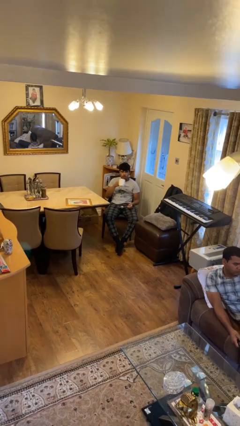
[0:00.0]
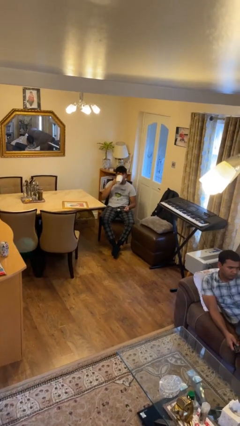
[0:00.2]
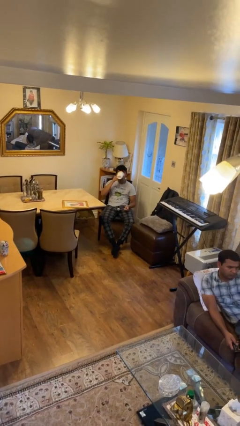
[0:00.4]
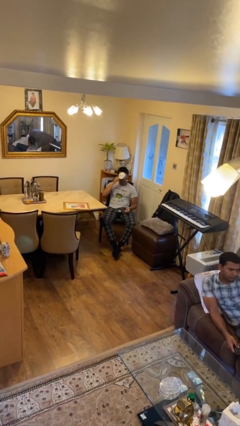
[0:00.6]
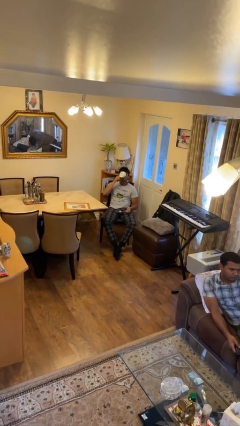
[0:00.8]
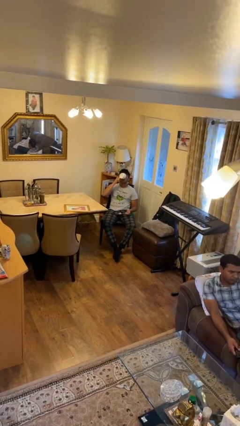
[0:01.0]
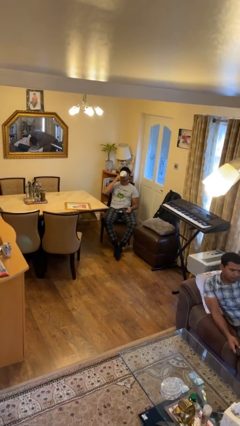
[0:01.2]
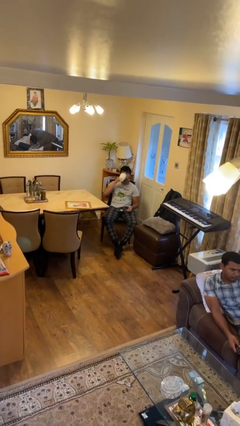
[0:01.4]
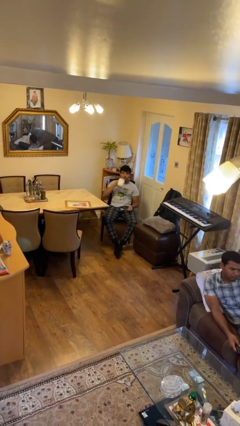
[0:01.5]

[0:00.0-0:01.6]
person drinks from mug

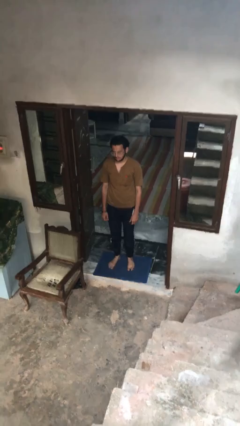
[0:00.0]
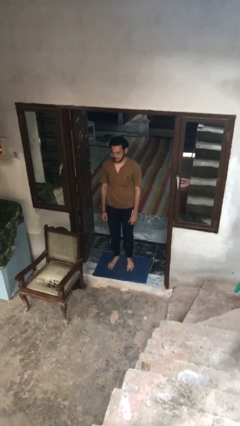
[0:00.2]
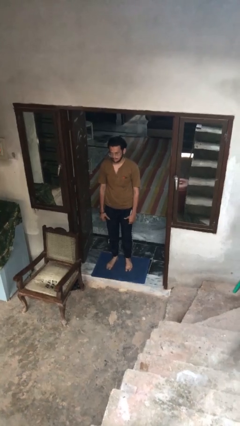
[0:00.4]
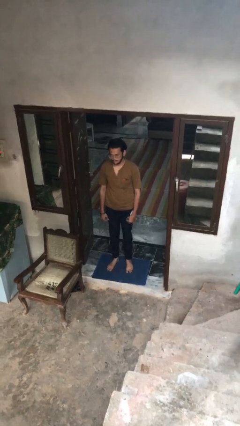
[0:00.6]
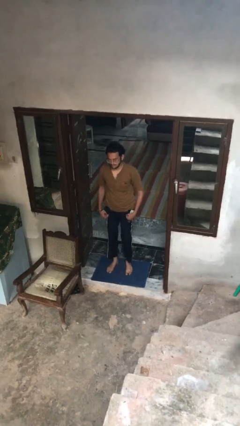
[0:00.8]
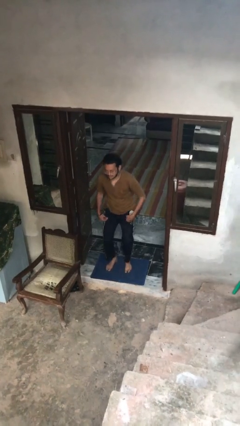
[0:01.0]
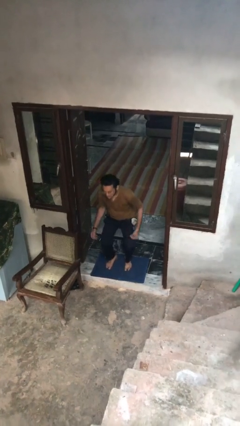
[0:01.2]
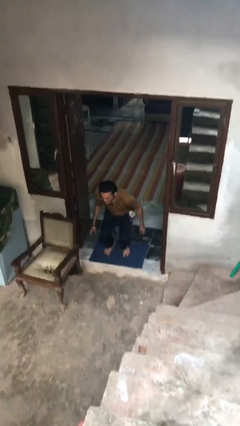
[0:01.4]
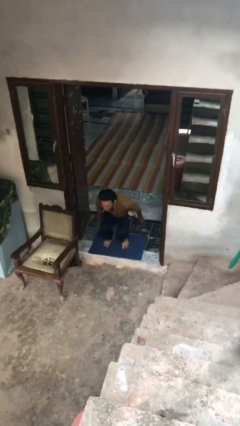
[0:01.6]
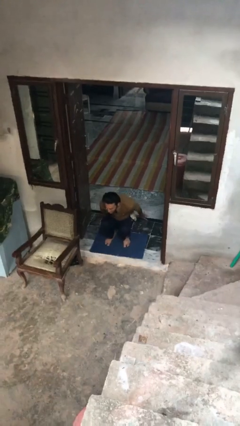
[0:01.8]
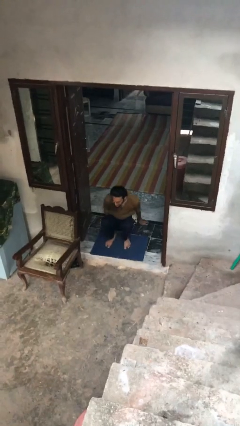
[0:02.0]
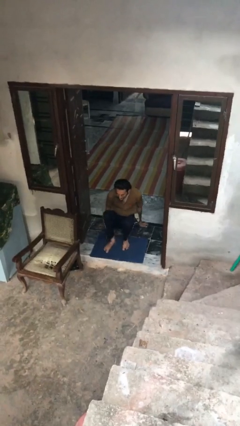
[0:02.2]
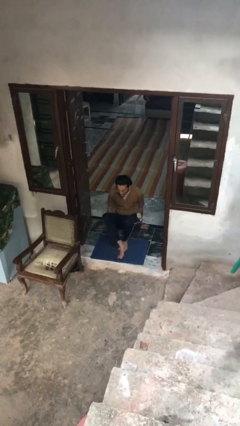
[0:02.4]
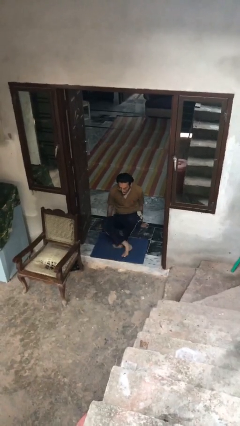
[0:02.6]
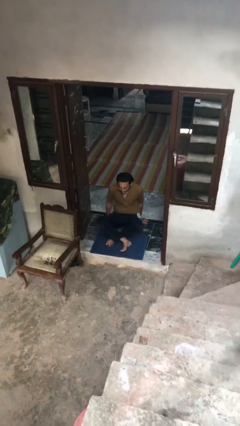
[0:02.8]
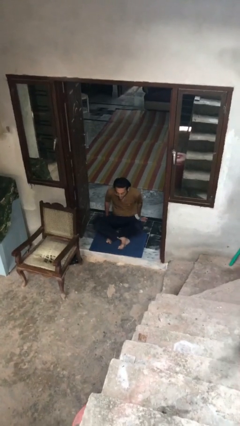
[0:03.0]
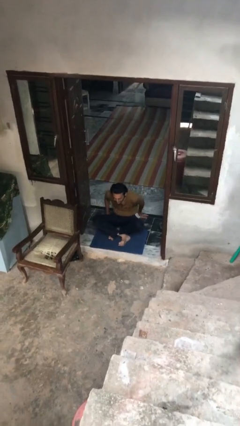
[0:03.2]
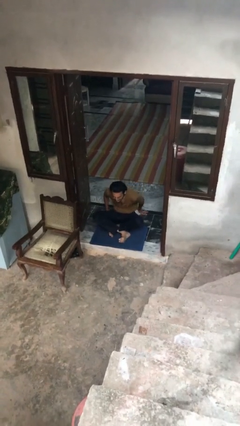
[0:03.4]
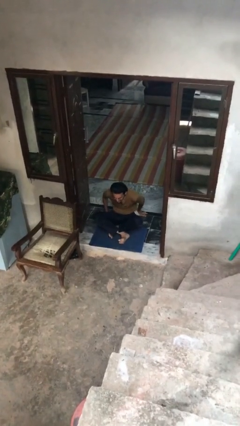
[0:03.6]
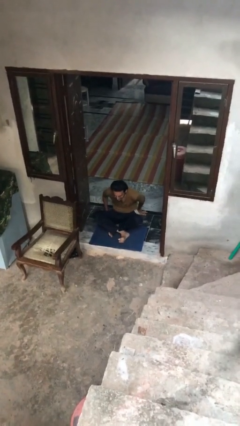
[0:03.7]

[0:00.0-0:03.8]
person sits crisscross

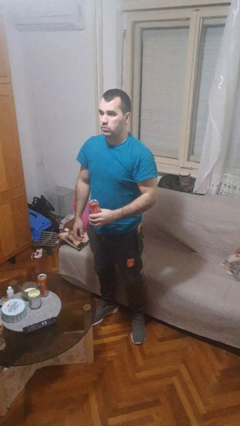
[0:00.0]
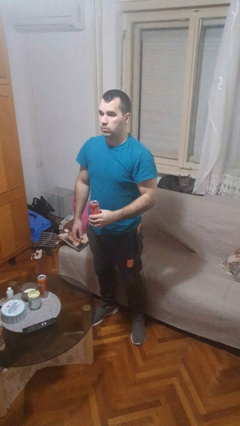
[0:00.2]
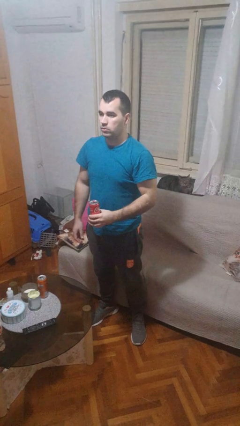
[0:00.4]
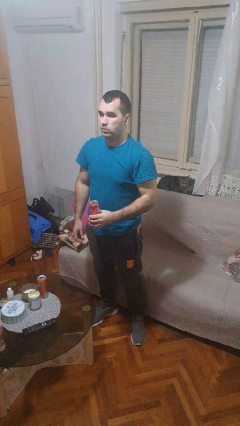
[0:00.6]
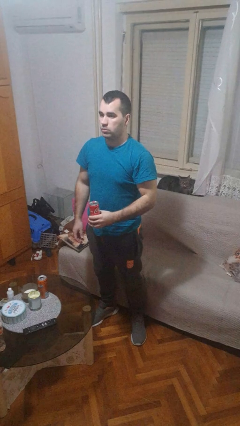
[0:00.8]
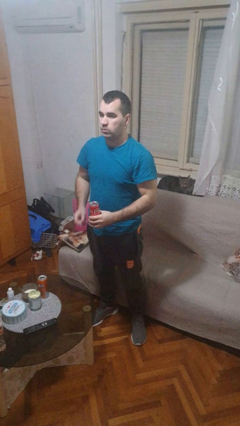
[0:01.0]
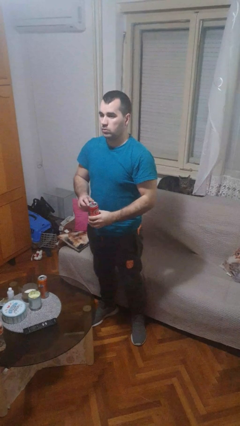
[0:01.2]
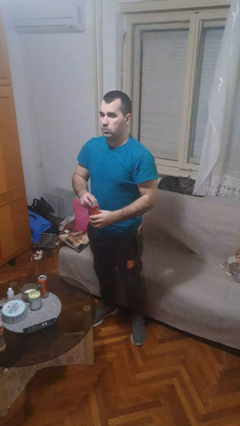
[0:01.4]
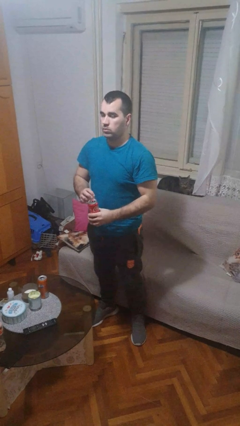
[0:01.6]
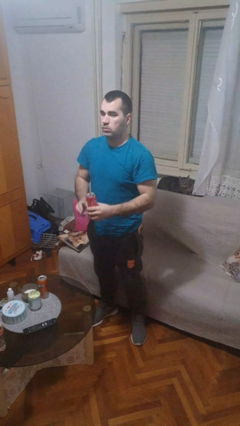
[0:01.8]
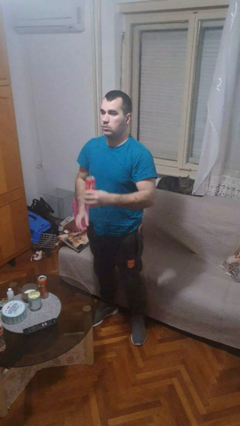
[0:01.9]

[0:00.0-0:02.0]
person opens beverage can

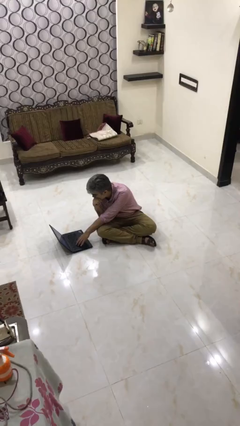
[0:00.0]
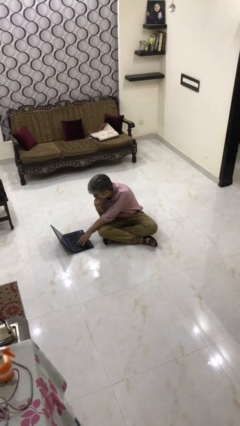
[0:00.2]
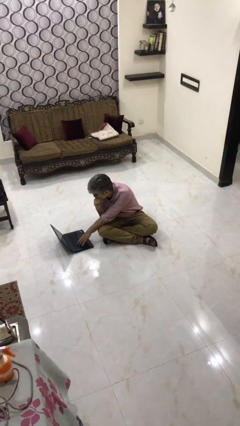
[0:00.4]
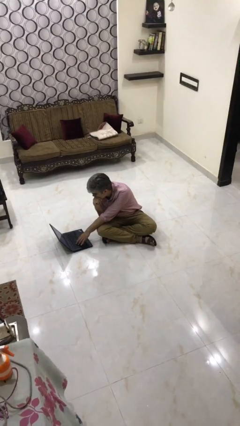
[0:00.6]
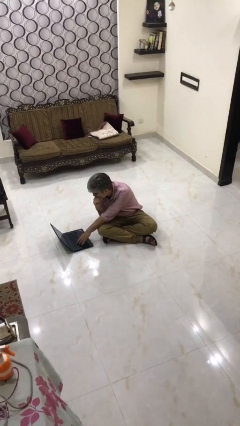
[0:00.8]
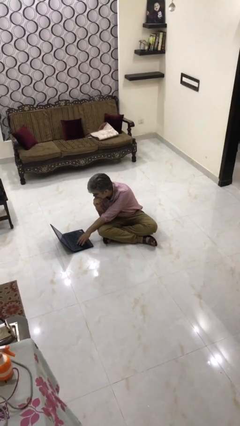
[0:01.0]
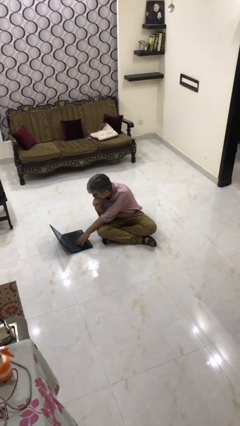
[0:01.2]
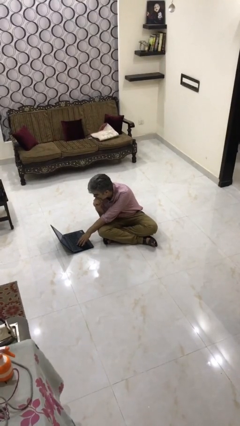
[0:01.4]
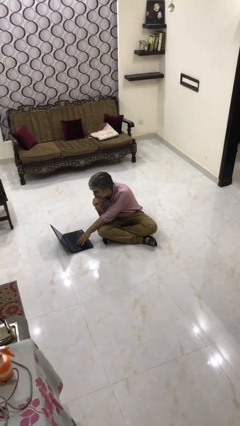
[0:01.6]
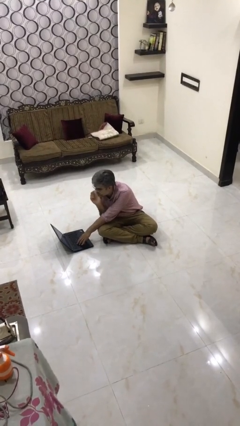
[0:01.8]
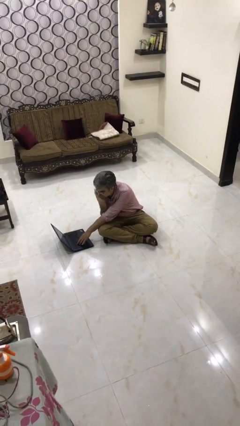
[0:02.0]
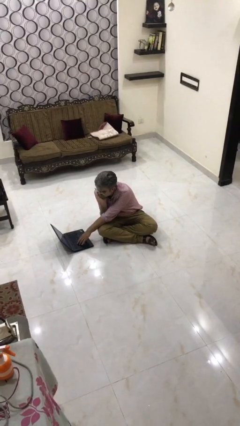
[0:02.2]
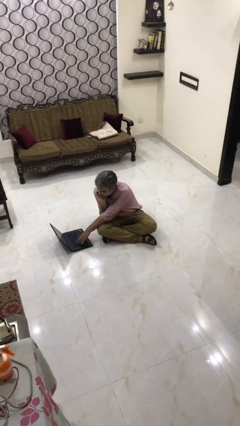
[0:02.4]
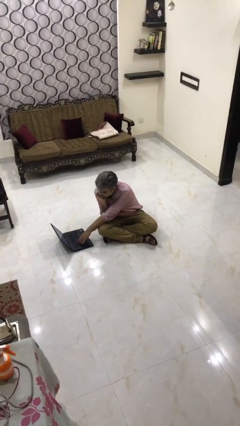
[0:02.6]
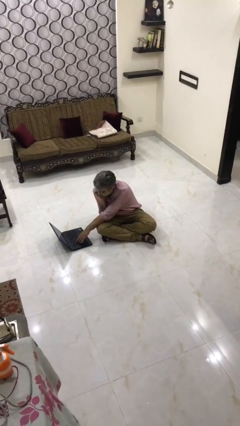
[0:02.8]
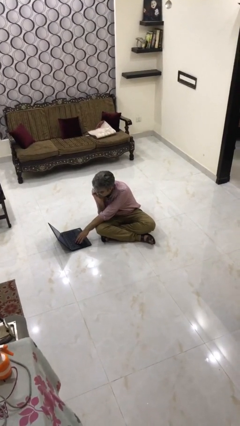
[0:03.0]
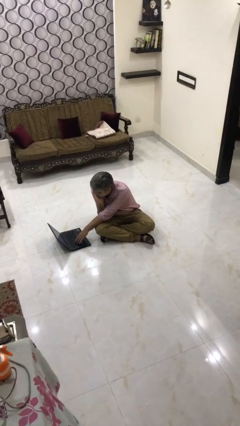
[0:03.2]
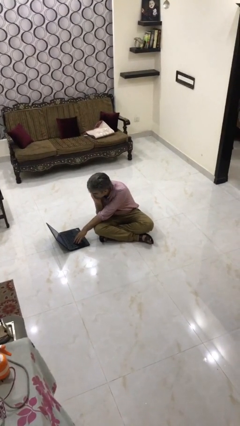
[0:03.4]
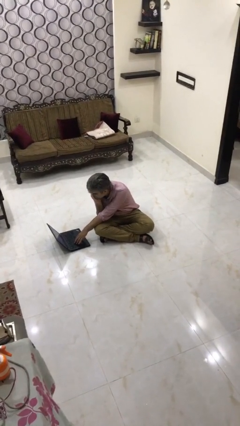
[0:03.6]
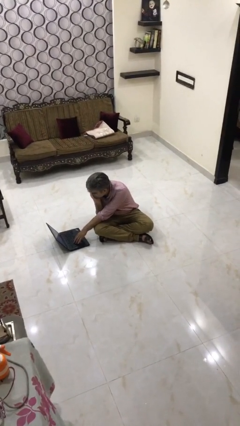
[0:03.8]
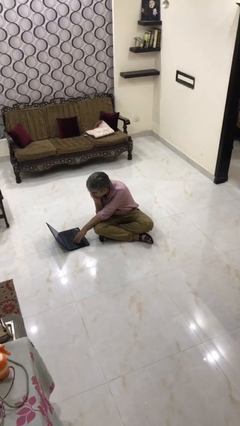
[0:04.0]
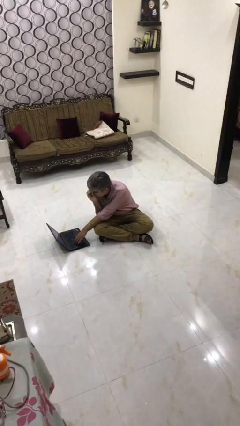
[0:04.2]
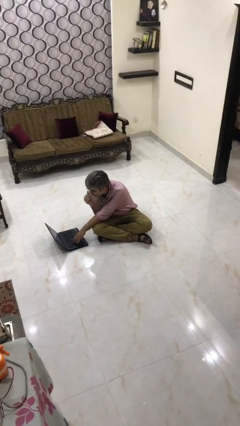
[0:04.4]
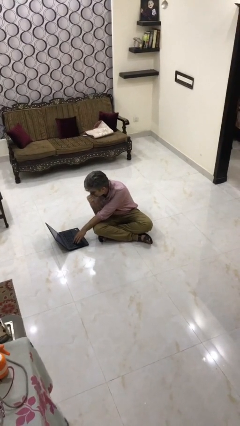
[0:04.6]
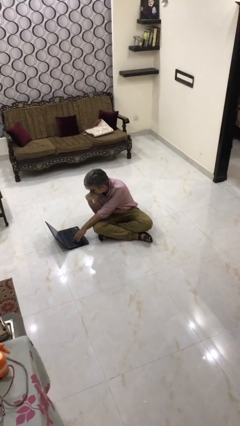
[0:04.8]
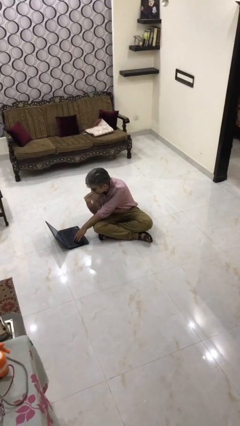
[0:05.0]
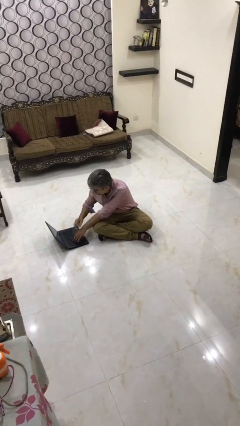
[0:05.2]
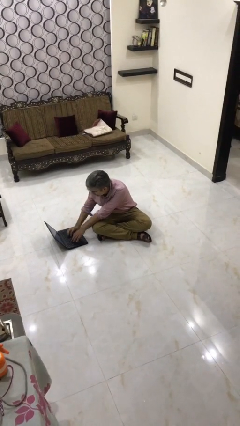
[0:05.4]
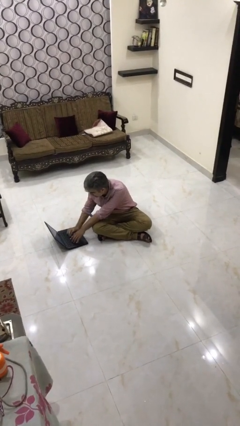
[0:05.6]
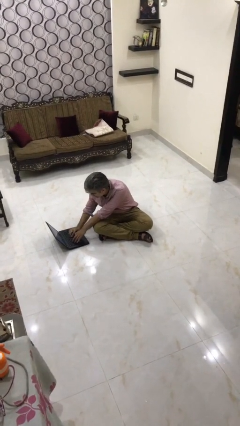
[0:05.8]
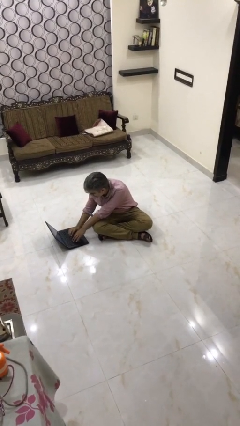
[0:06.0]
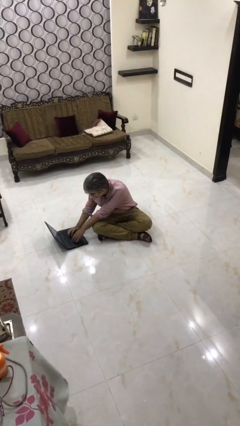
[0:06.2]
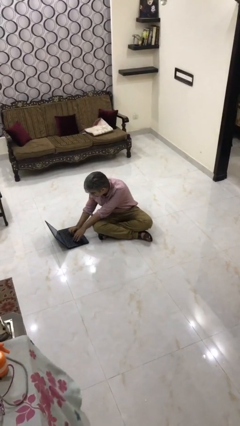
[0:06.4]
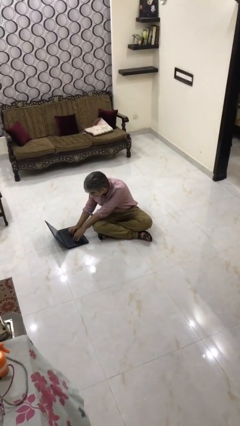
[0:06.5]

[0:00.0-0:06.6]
person interacts with laptop

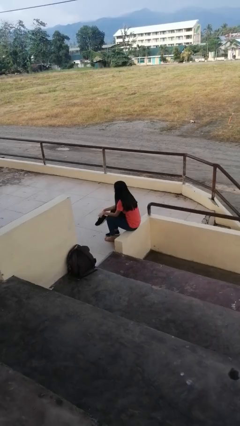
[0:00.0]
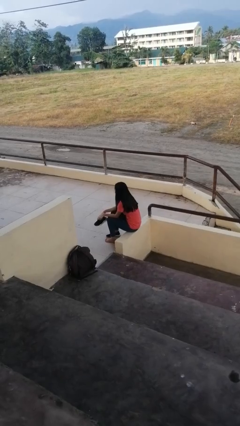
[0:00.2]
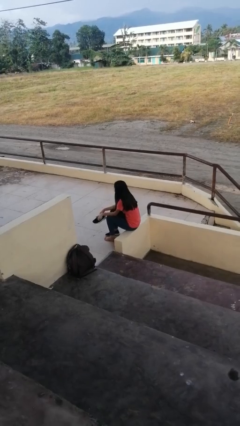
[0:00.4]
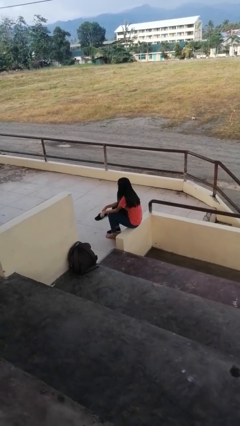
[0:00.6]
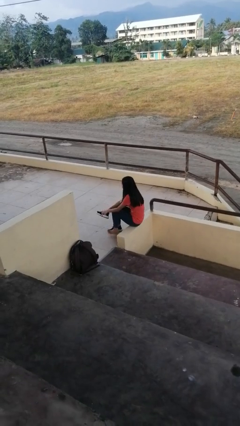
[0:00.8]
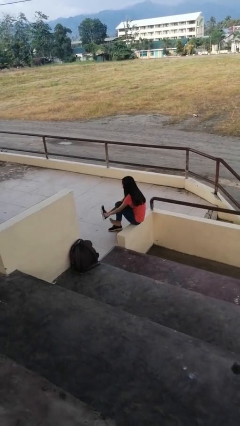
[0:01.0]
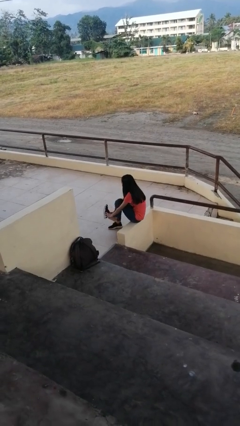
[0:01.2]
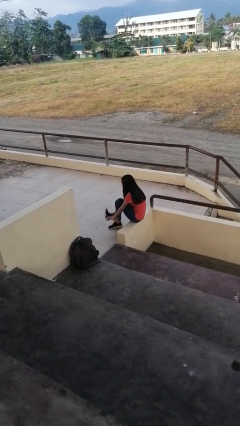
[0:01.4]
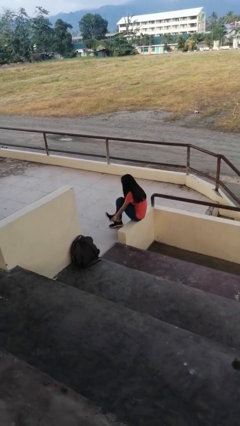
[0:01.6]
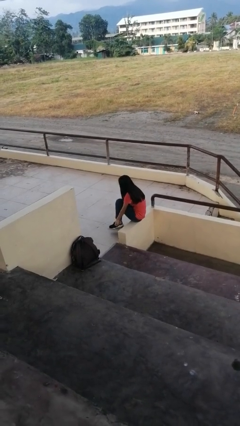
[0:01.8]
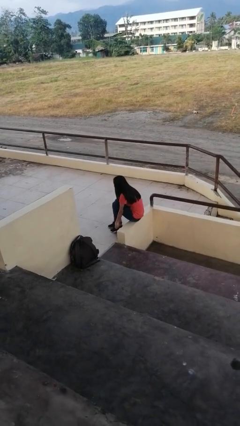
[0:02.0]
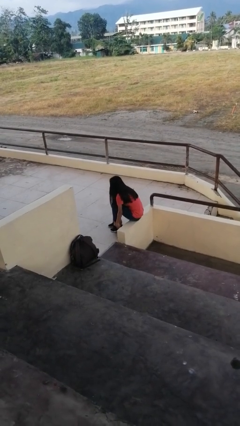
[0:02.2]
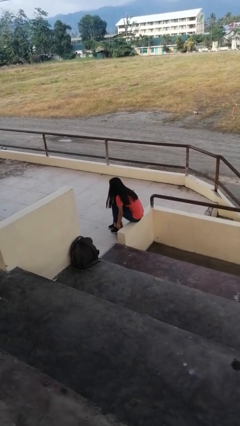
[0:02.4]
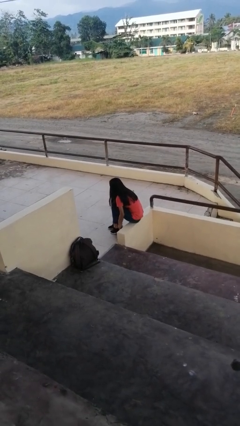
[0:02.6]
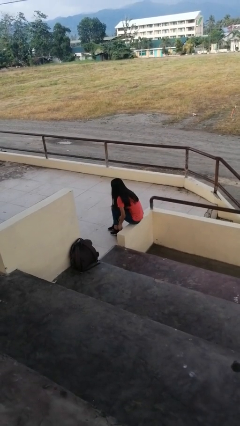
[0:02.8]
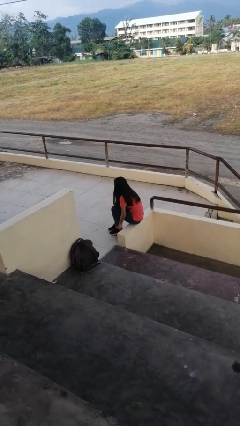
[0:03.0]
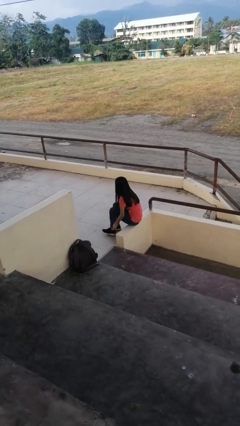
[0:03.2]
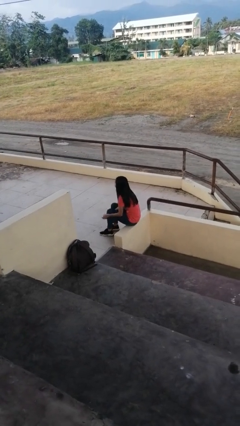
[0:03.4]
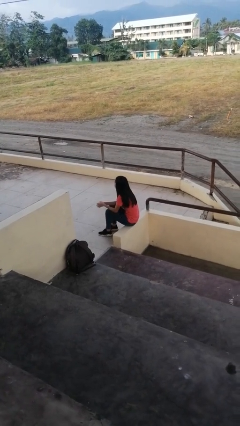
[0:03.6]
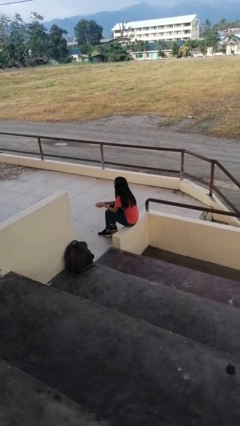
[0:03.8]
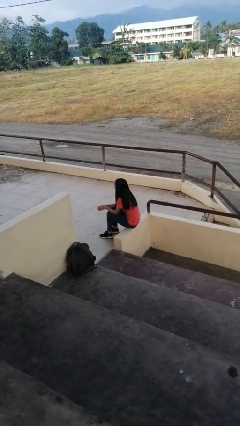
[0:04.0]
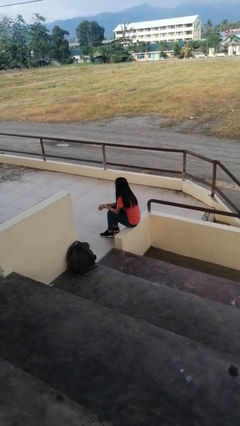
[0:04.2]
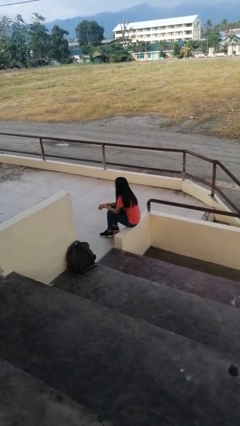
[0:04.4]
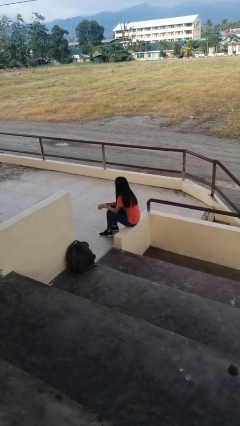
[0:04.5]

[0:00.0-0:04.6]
person puts on shoes
